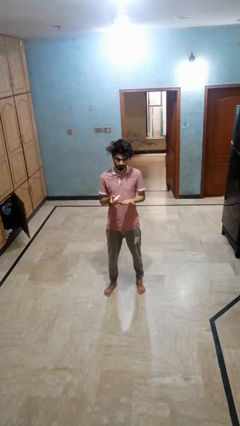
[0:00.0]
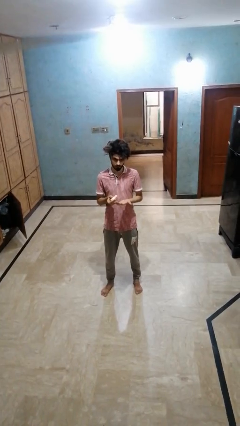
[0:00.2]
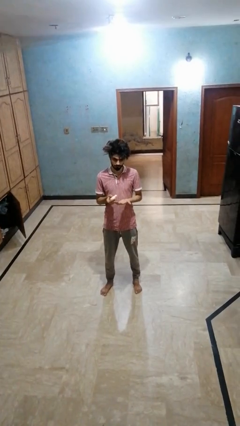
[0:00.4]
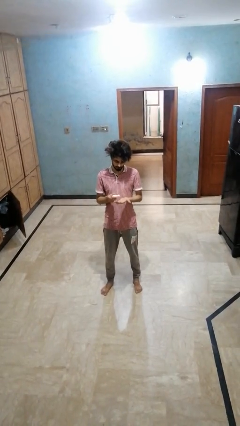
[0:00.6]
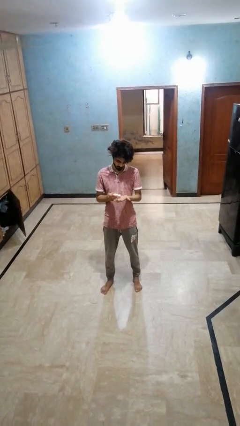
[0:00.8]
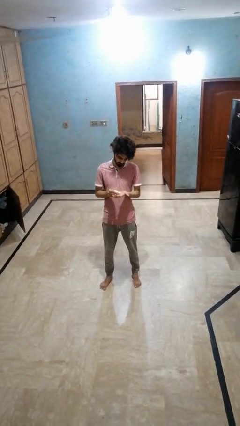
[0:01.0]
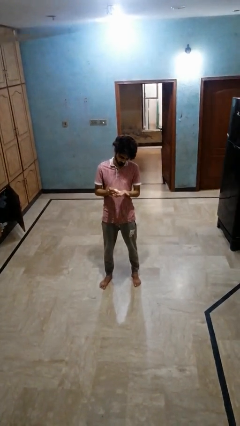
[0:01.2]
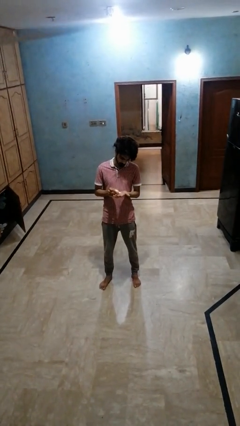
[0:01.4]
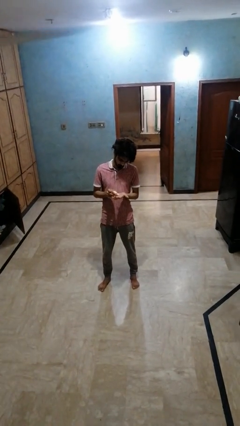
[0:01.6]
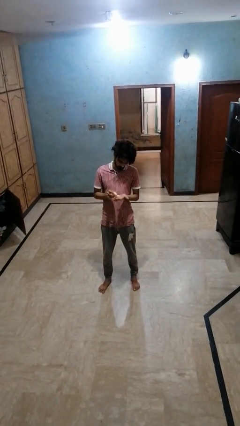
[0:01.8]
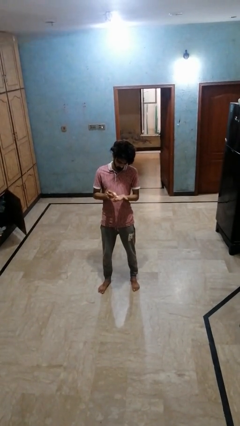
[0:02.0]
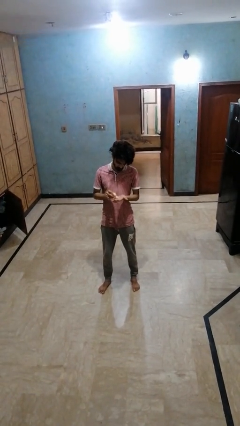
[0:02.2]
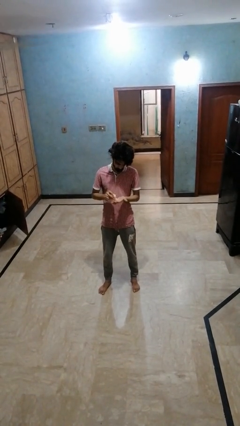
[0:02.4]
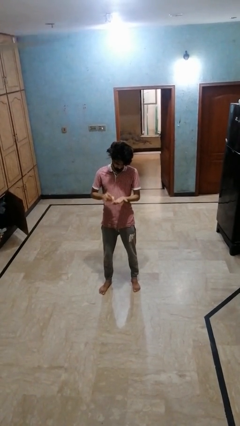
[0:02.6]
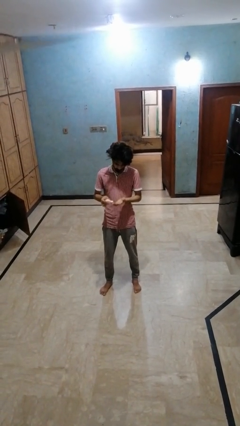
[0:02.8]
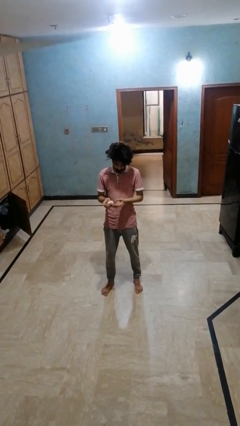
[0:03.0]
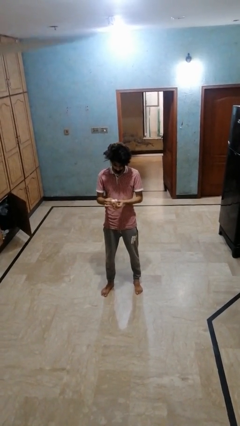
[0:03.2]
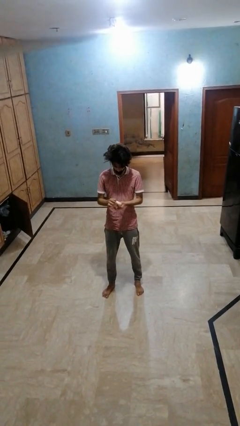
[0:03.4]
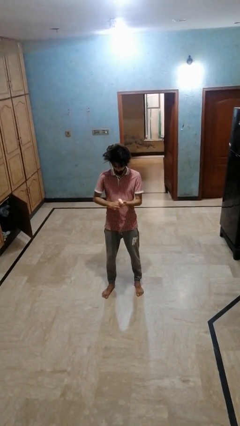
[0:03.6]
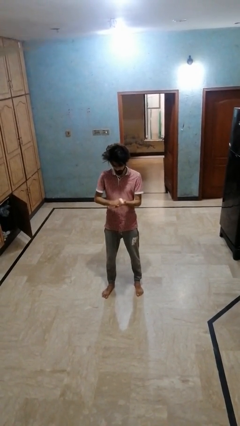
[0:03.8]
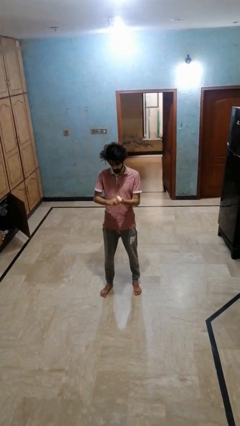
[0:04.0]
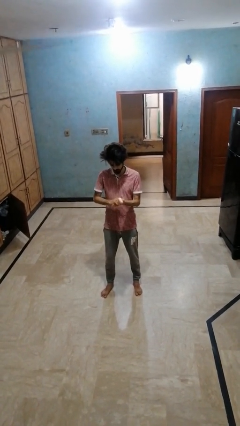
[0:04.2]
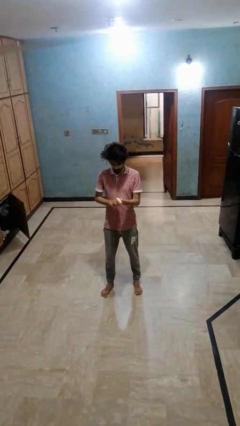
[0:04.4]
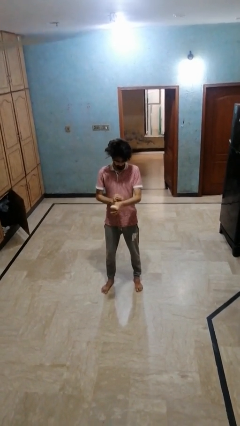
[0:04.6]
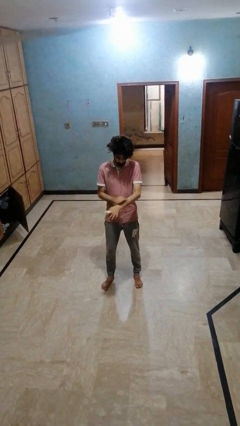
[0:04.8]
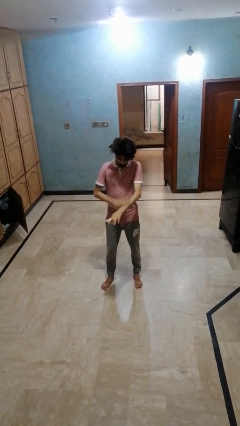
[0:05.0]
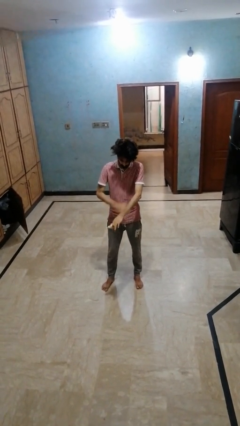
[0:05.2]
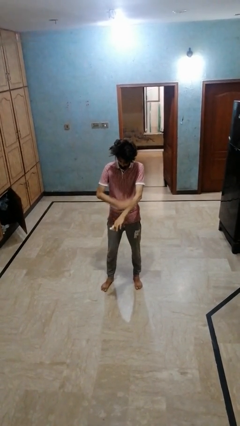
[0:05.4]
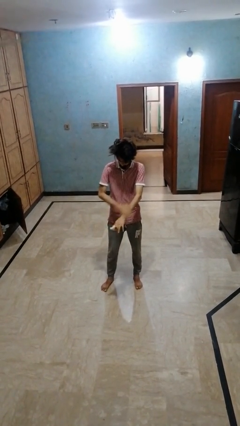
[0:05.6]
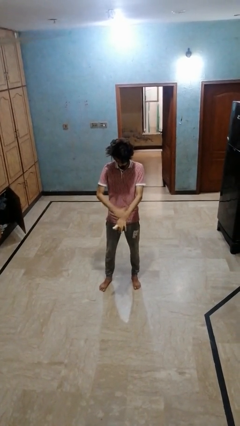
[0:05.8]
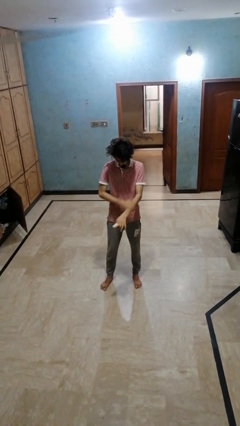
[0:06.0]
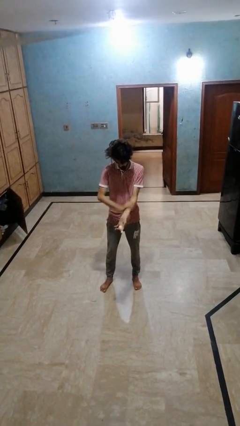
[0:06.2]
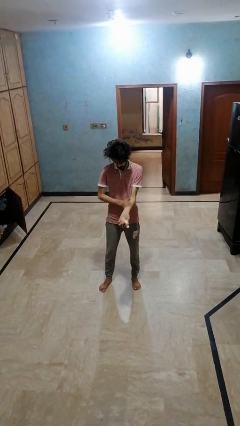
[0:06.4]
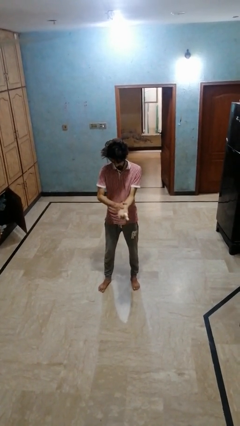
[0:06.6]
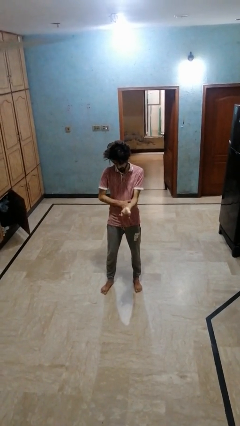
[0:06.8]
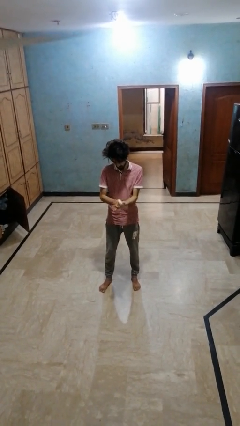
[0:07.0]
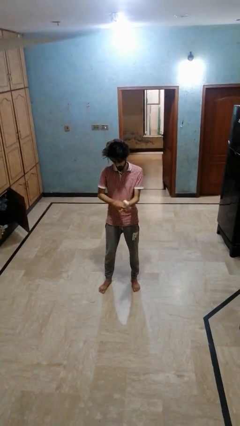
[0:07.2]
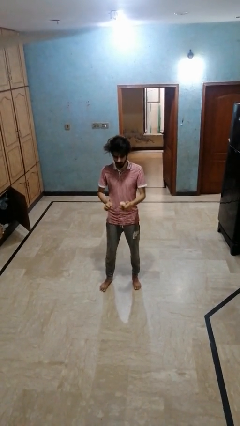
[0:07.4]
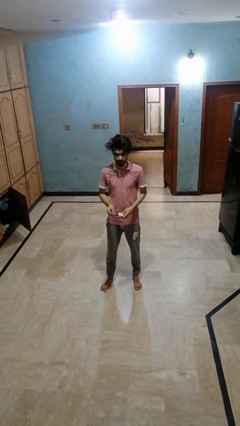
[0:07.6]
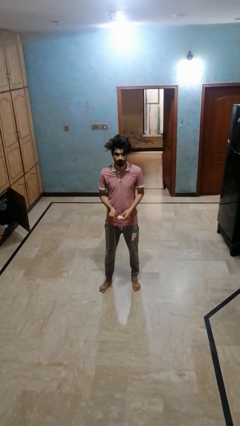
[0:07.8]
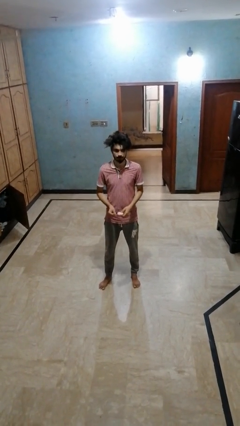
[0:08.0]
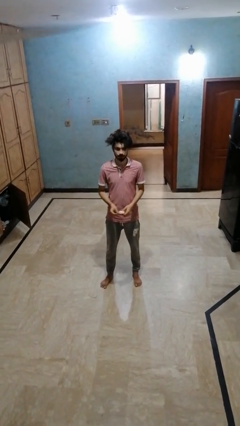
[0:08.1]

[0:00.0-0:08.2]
person applies sunscreen

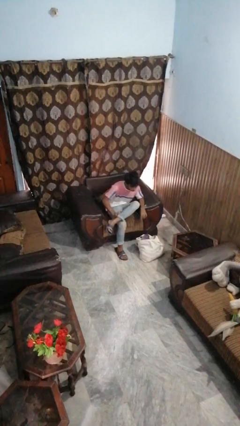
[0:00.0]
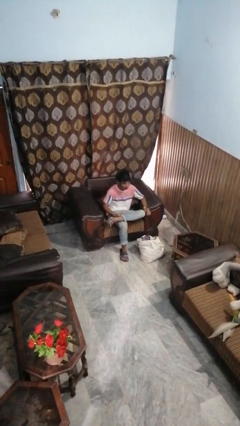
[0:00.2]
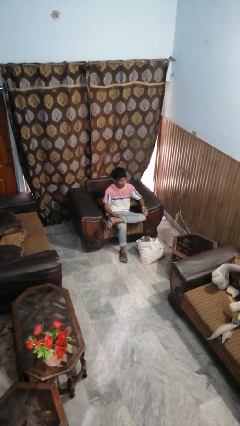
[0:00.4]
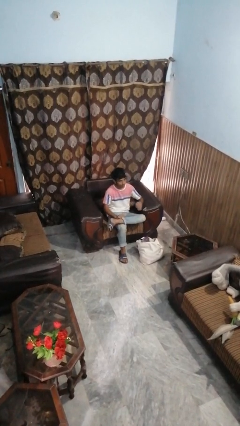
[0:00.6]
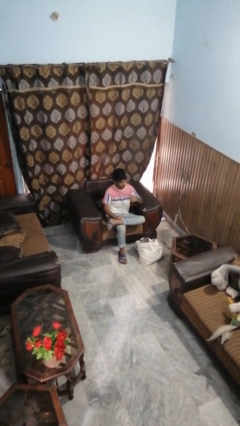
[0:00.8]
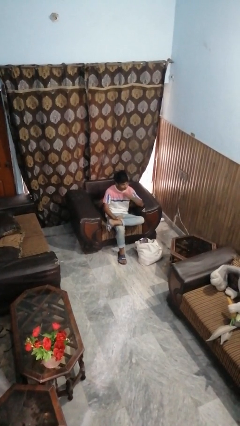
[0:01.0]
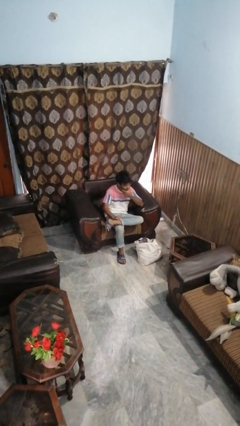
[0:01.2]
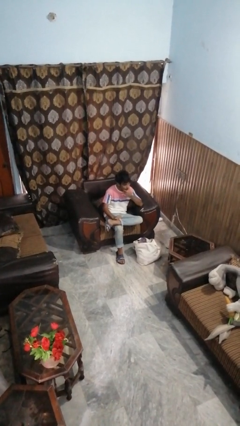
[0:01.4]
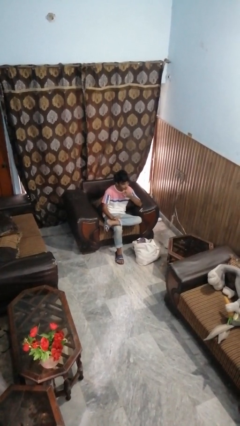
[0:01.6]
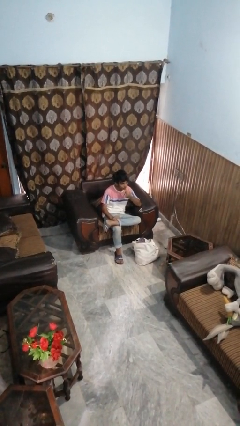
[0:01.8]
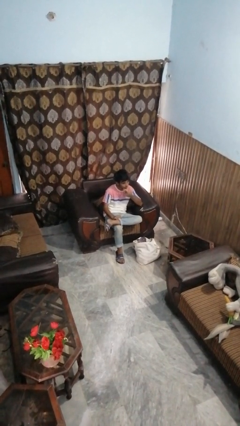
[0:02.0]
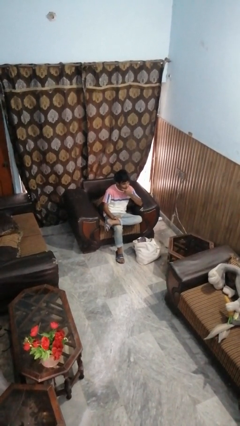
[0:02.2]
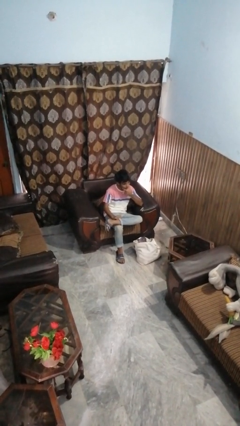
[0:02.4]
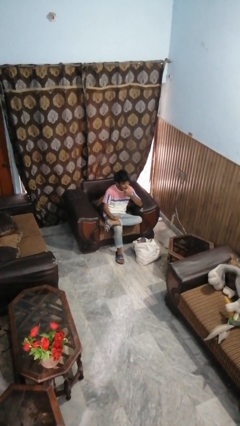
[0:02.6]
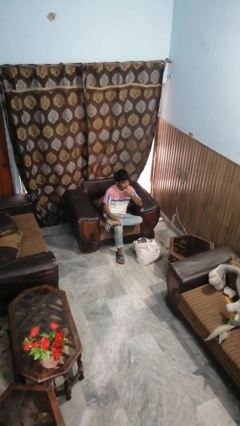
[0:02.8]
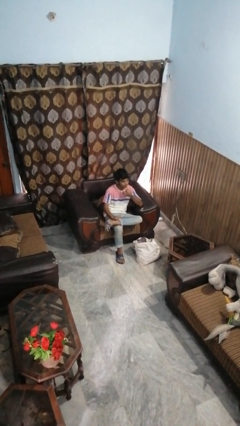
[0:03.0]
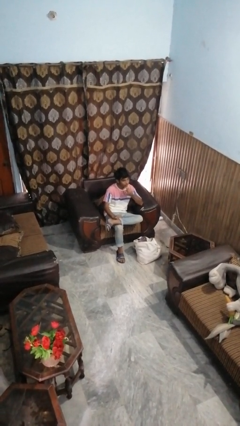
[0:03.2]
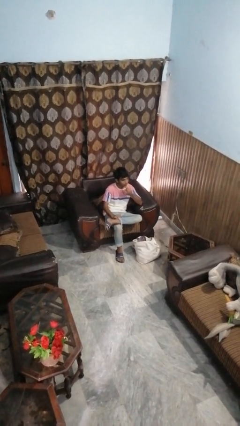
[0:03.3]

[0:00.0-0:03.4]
person strokes chin

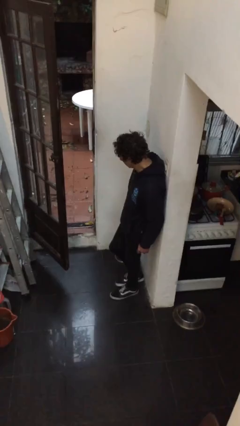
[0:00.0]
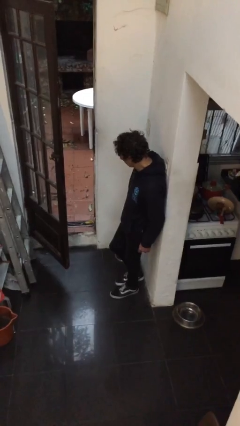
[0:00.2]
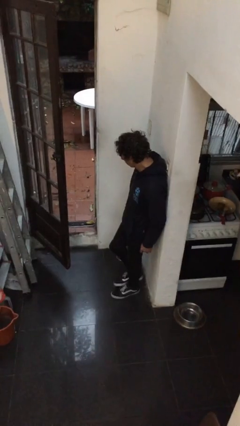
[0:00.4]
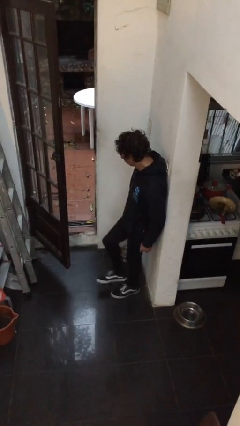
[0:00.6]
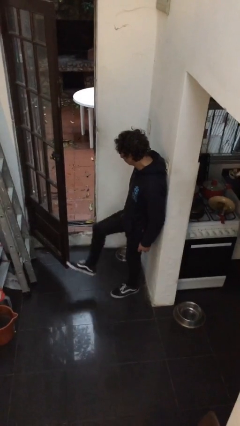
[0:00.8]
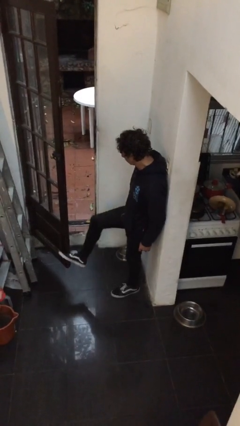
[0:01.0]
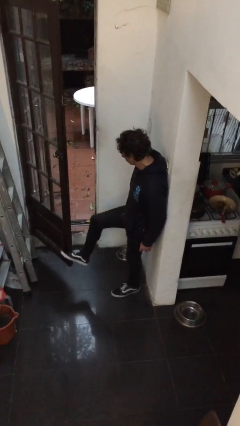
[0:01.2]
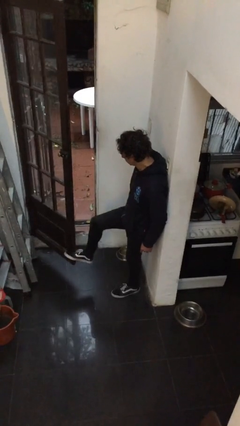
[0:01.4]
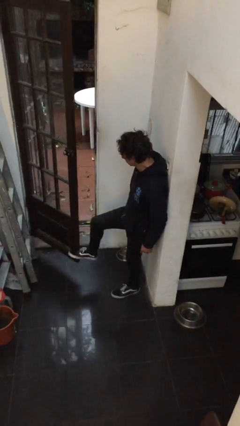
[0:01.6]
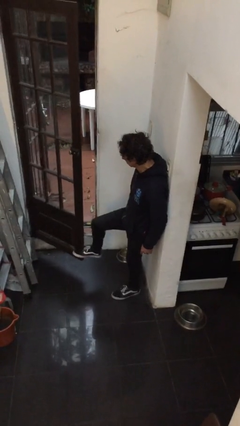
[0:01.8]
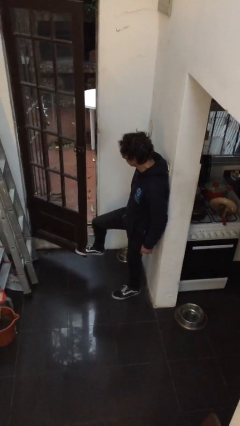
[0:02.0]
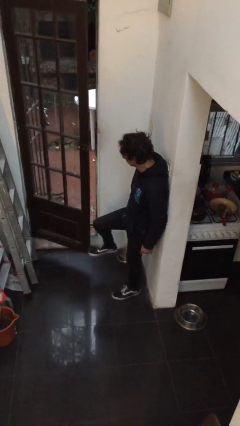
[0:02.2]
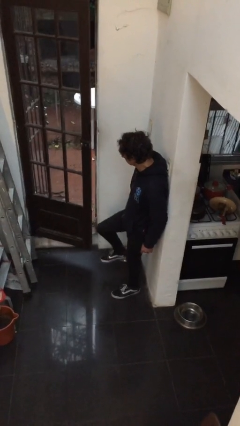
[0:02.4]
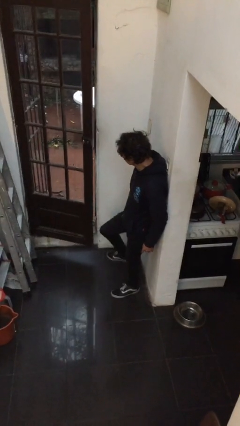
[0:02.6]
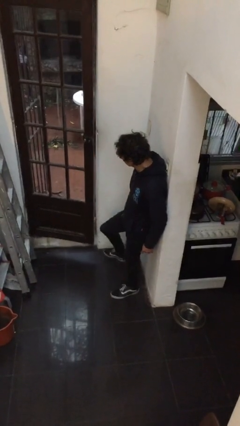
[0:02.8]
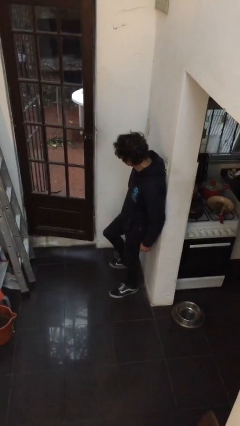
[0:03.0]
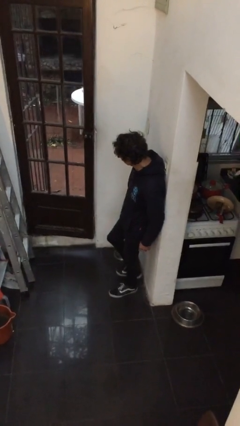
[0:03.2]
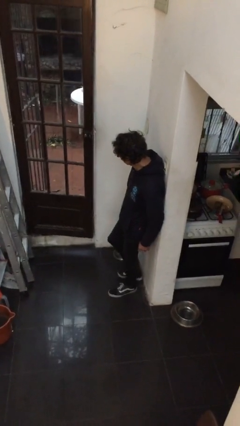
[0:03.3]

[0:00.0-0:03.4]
person closes door with foot

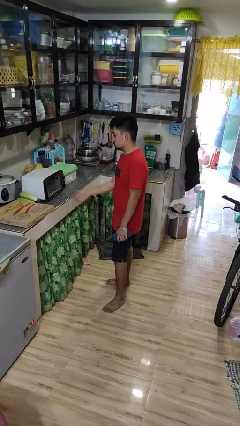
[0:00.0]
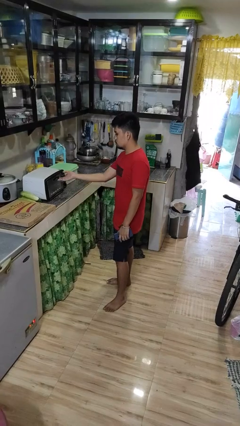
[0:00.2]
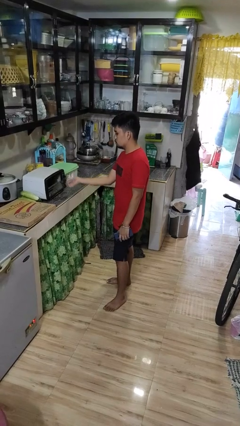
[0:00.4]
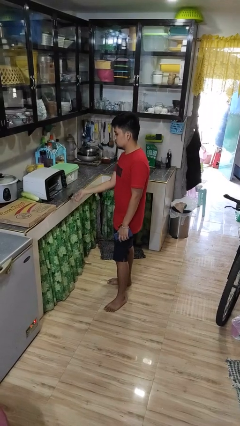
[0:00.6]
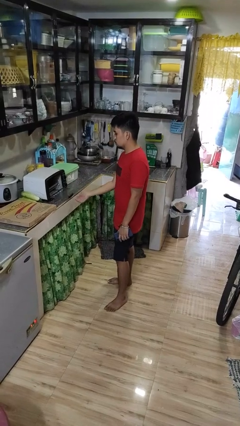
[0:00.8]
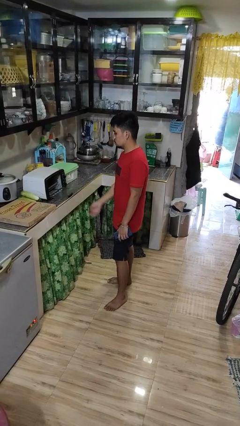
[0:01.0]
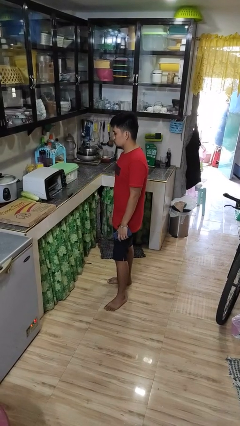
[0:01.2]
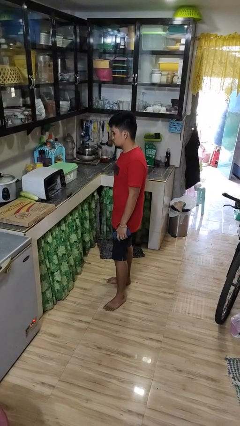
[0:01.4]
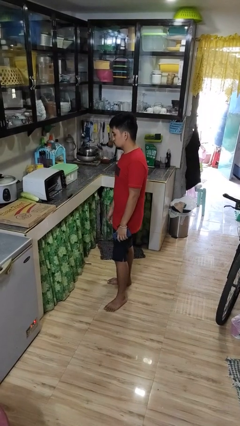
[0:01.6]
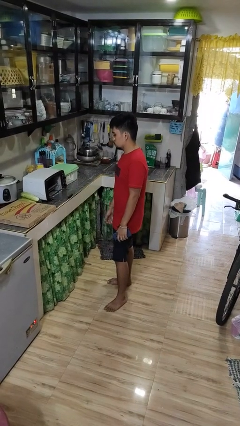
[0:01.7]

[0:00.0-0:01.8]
person opens microwave

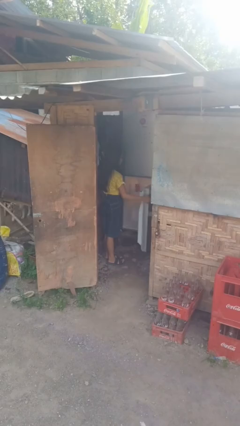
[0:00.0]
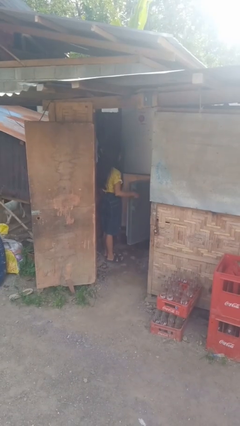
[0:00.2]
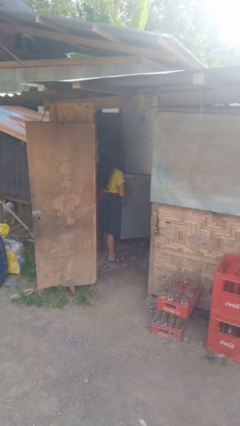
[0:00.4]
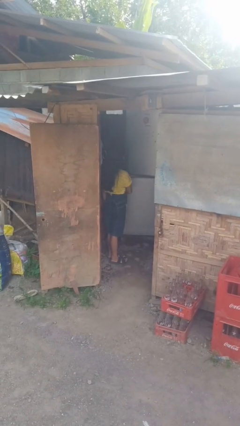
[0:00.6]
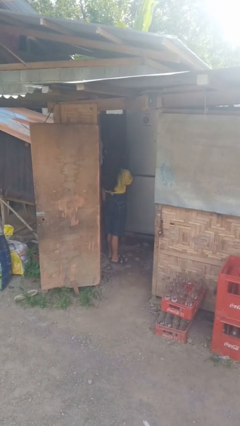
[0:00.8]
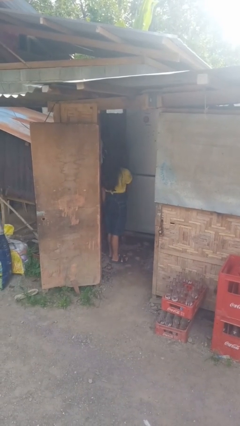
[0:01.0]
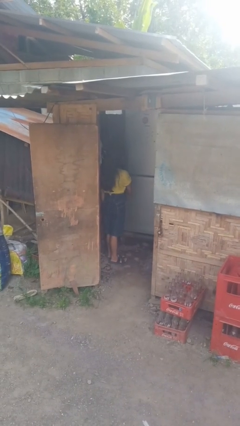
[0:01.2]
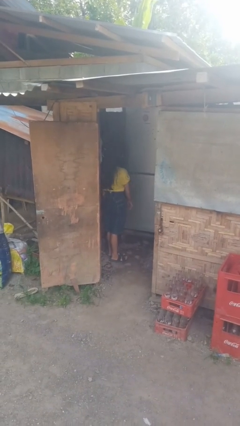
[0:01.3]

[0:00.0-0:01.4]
person closes refrigerator
